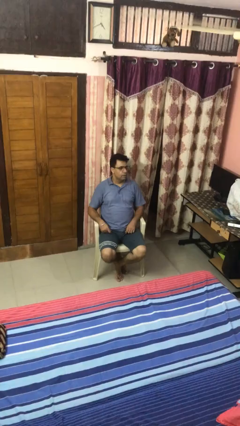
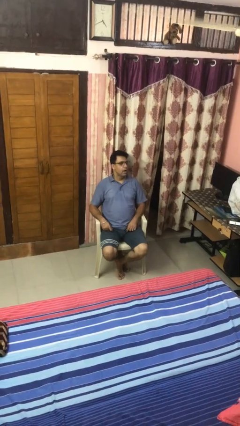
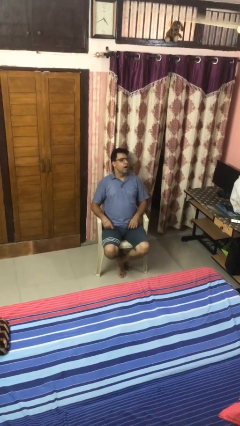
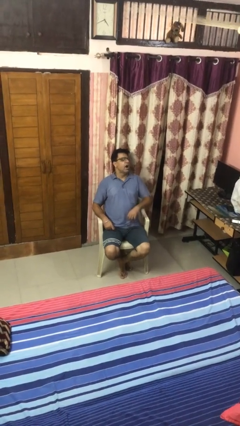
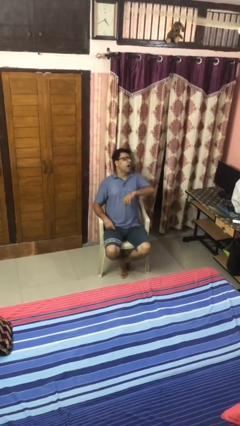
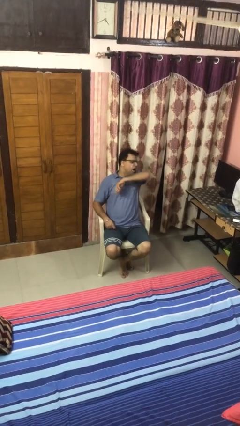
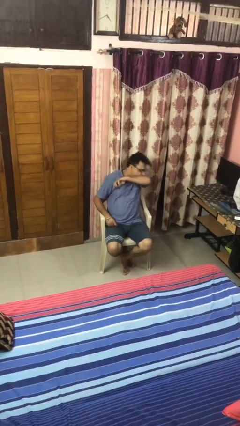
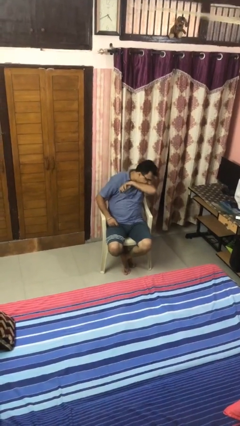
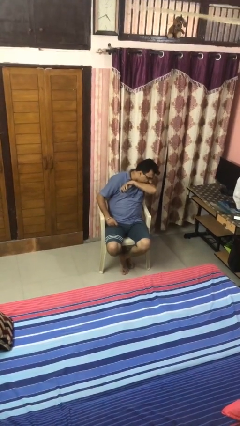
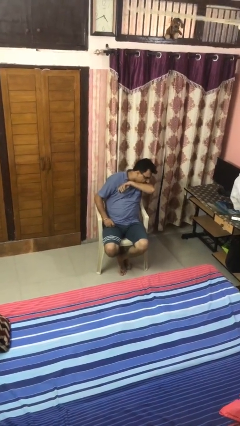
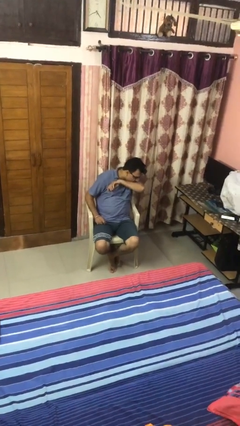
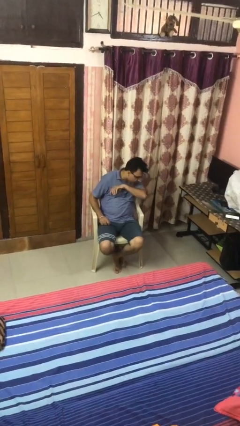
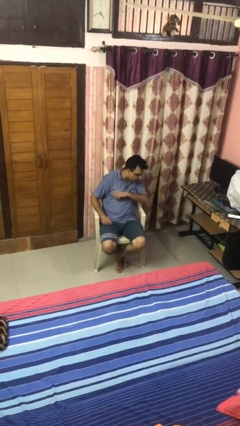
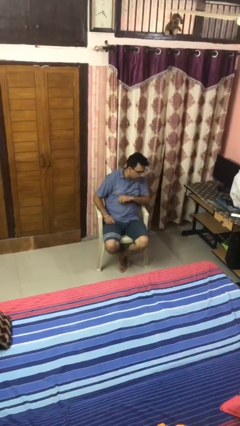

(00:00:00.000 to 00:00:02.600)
person sneezes into arm

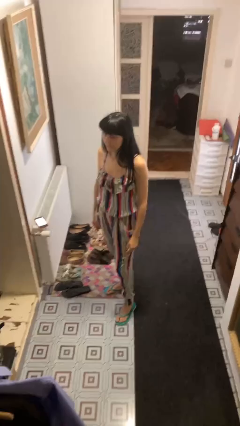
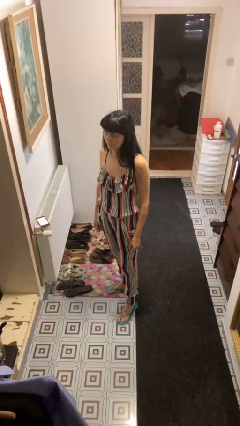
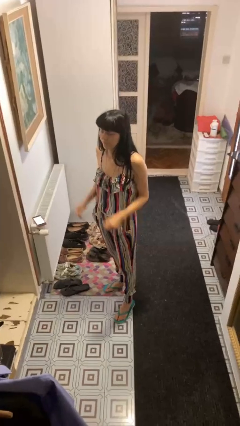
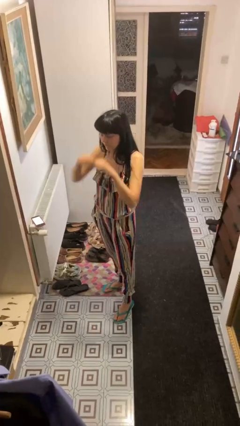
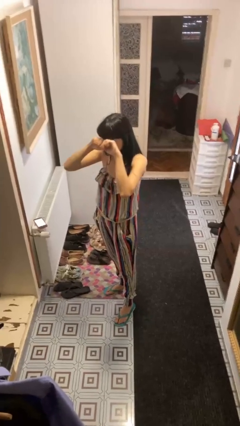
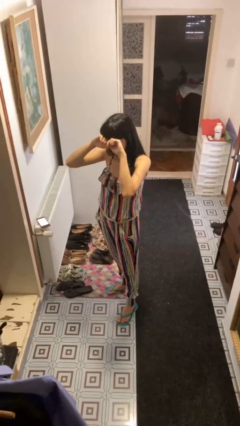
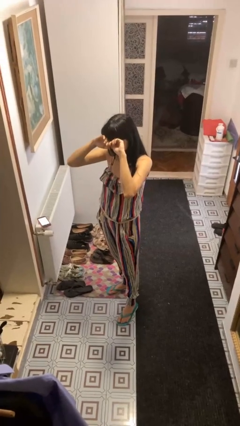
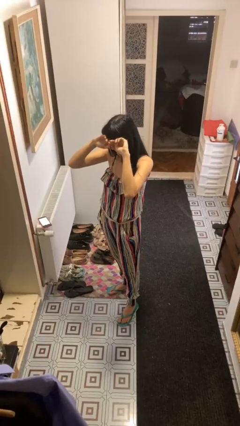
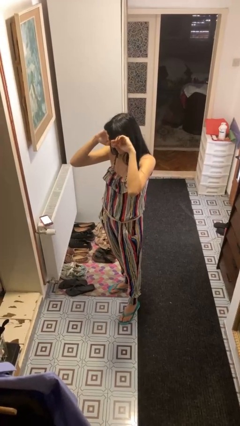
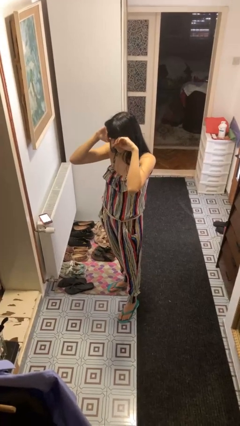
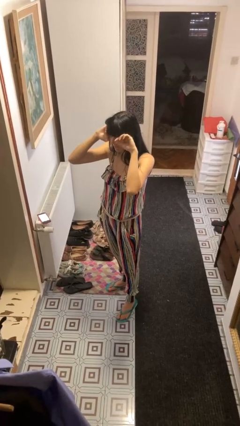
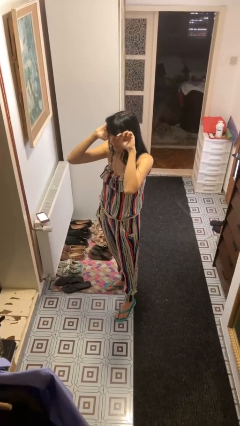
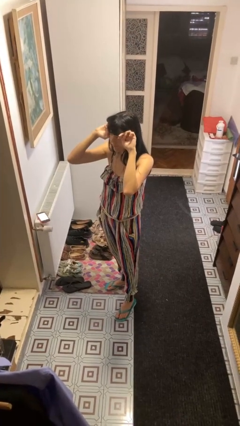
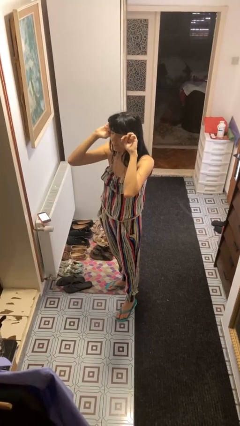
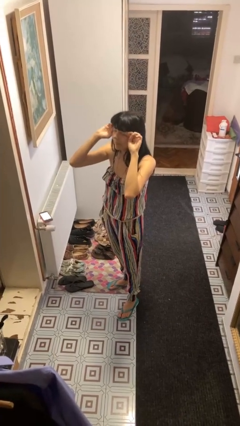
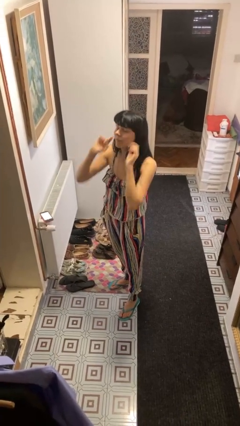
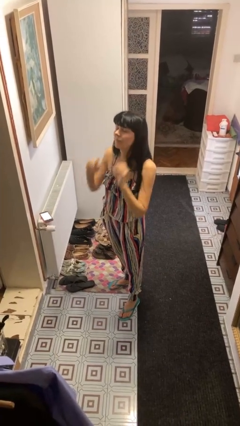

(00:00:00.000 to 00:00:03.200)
person rubs eyes

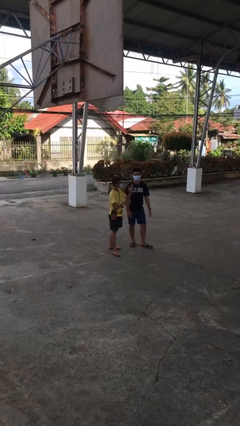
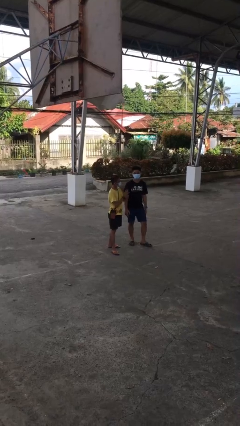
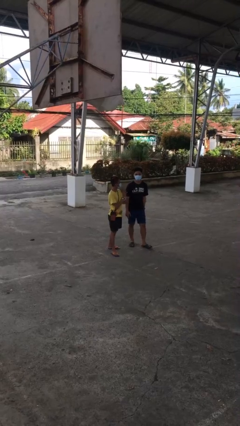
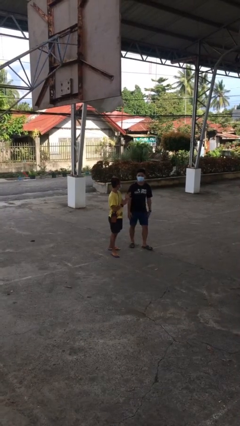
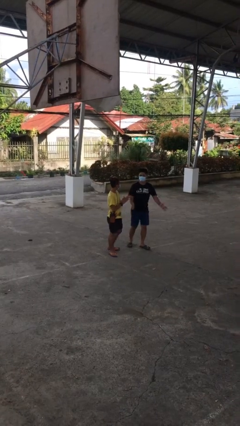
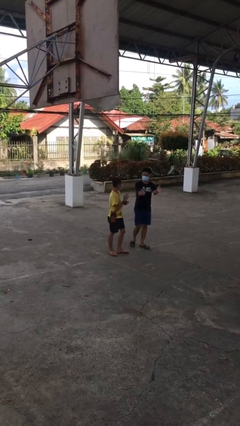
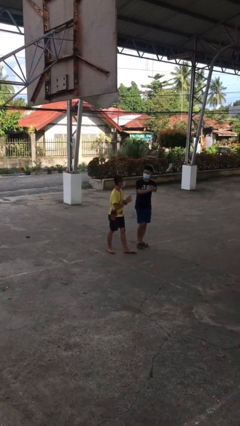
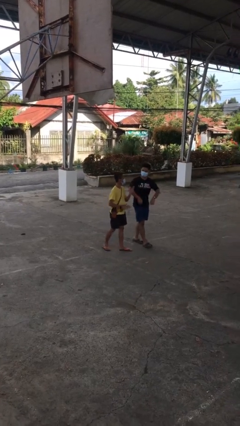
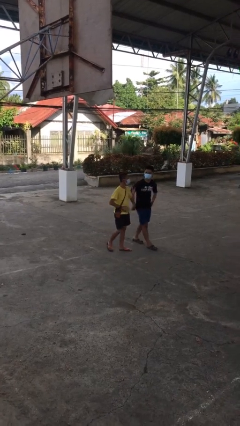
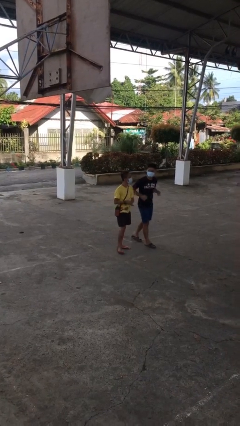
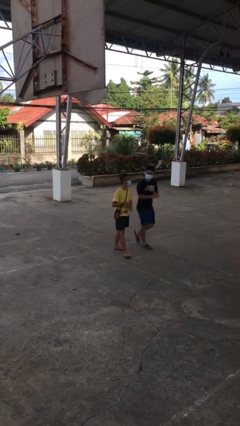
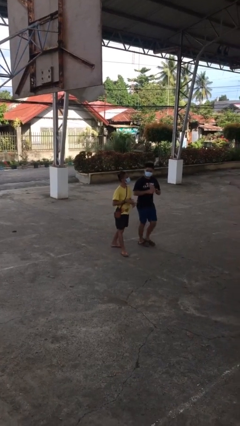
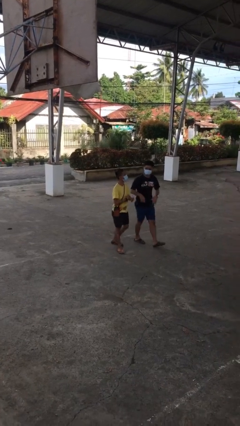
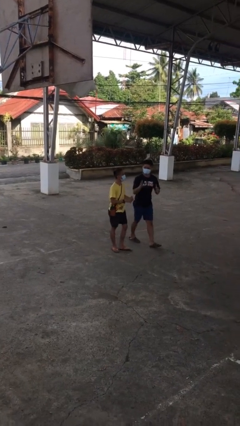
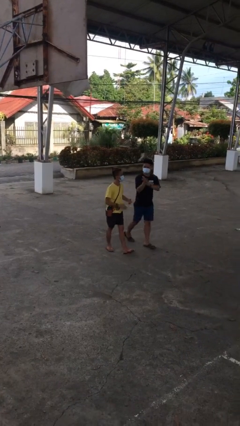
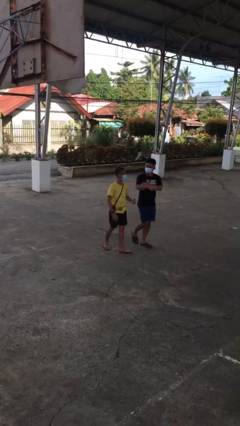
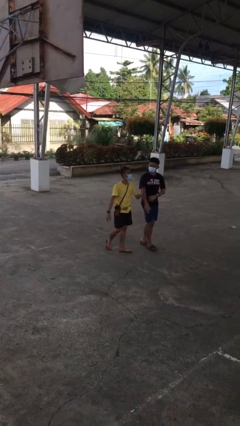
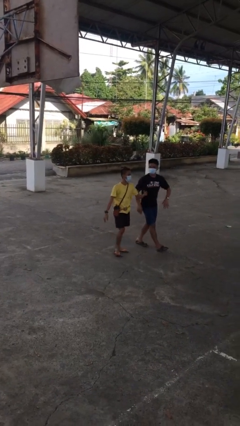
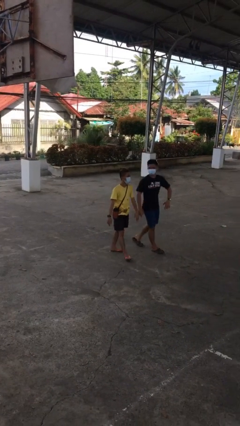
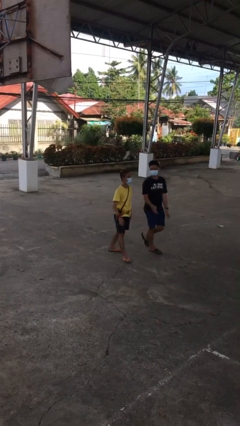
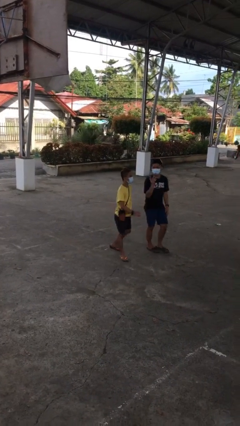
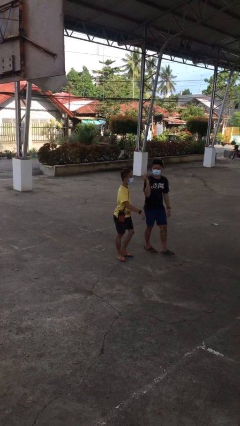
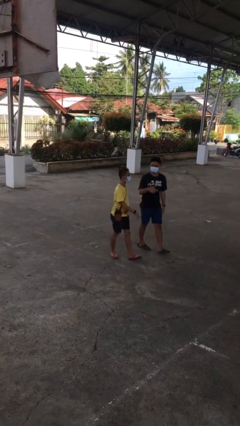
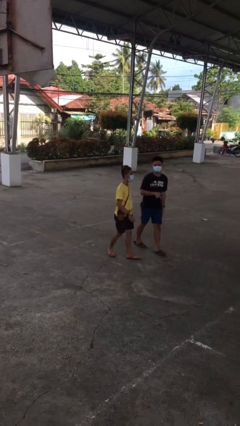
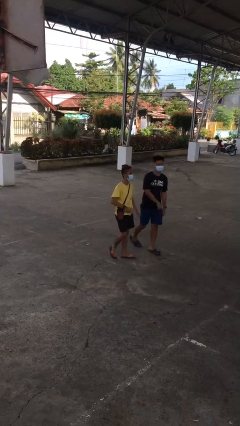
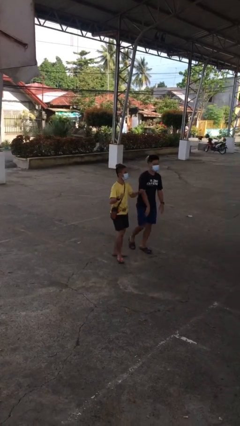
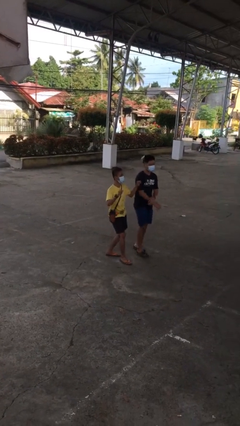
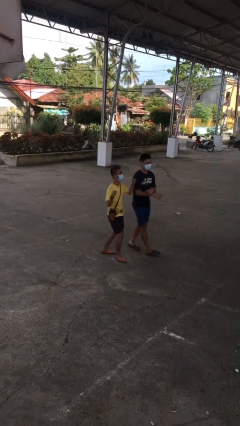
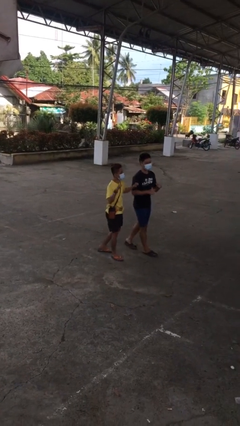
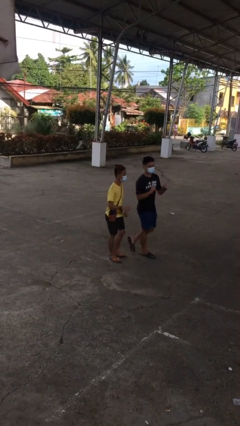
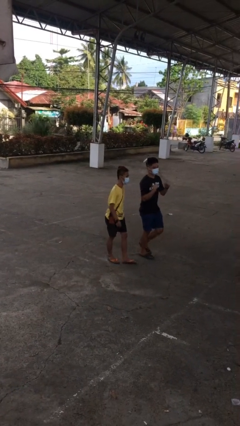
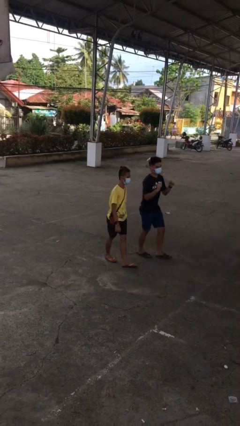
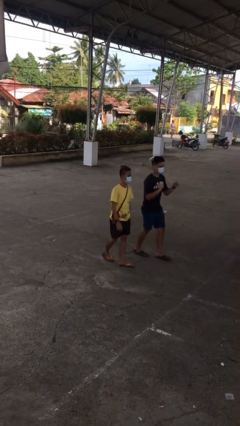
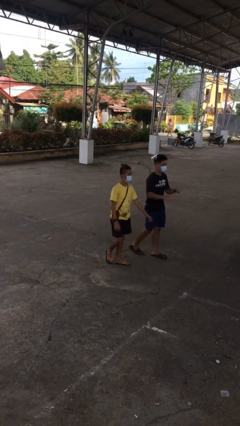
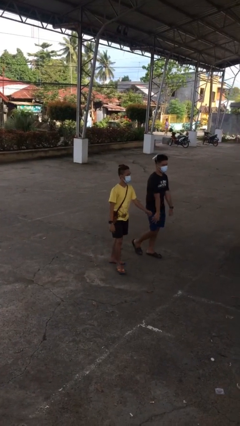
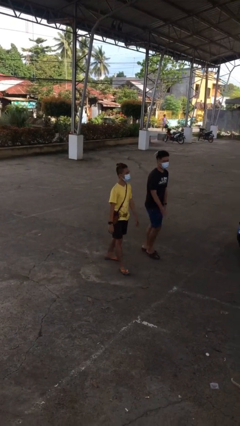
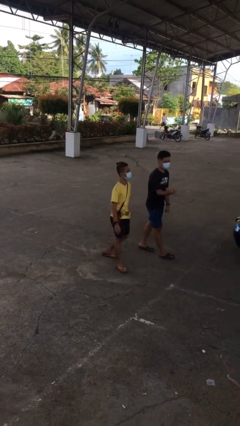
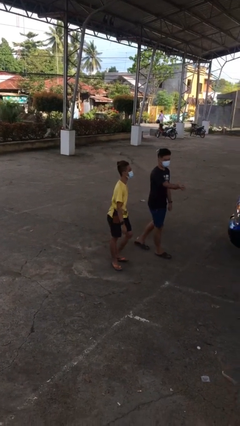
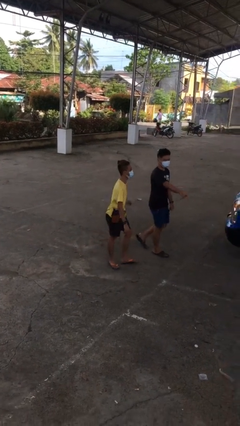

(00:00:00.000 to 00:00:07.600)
person talks to person

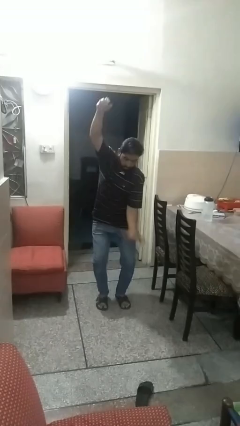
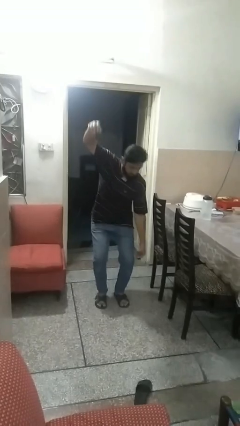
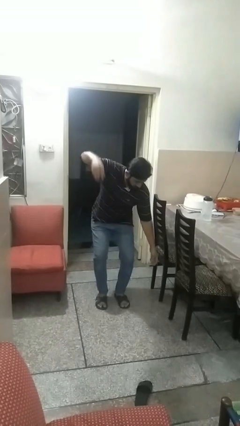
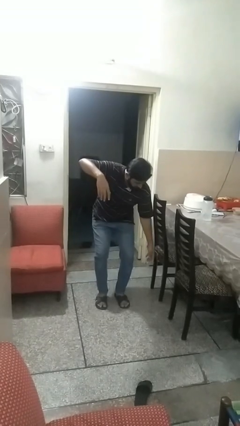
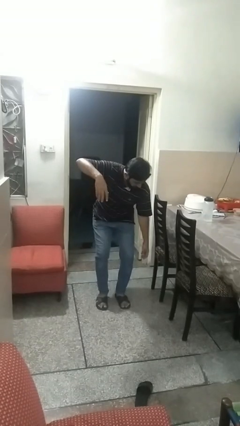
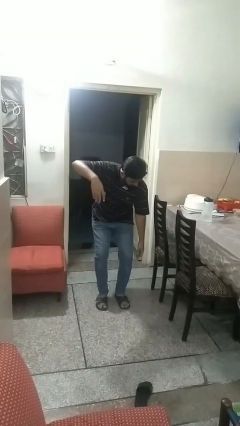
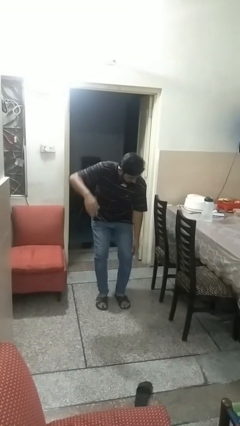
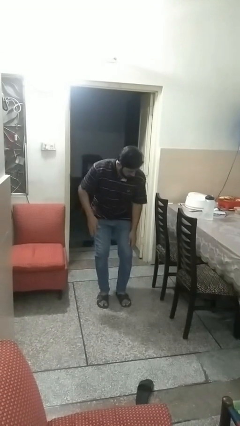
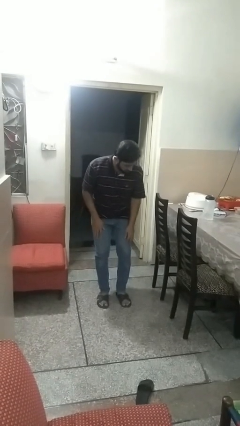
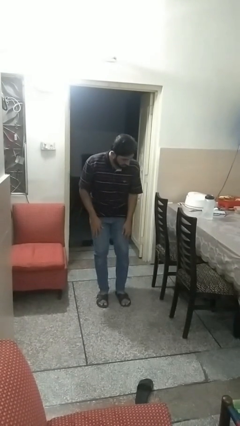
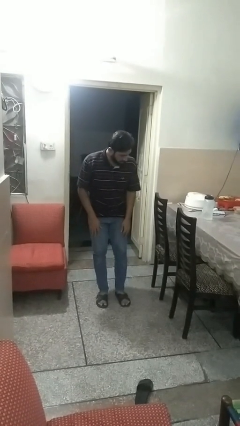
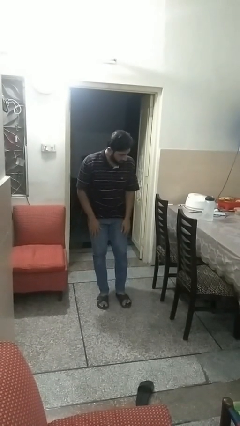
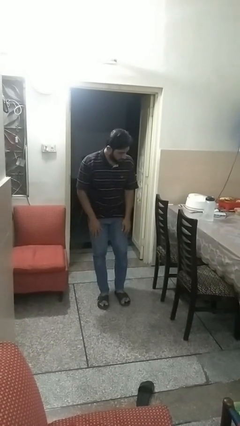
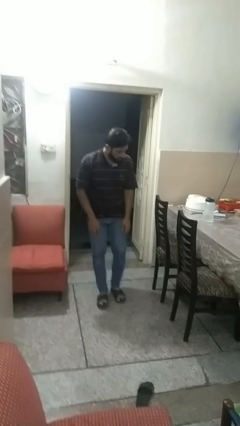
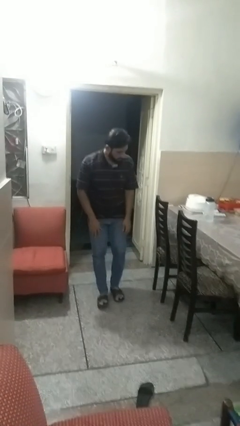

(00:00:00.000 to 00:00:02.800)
person catches dropped object

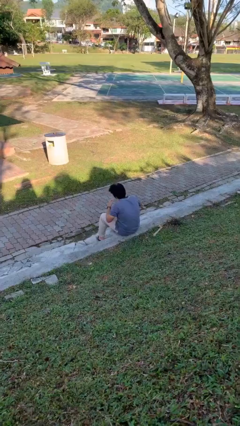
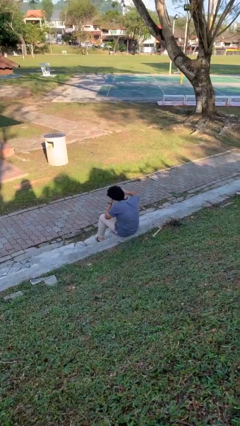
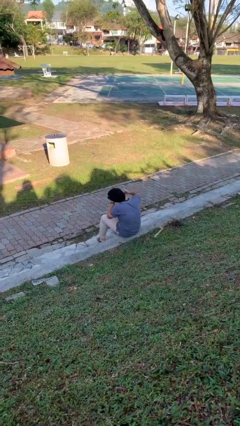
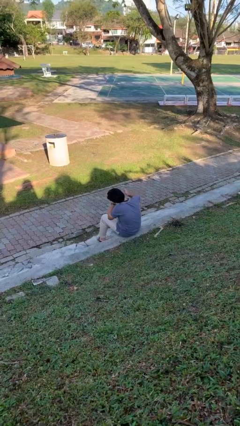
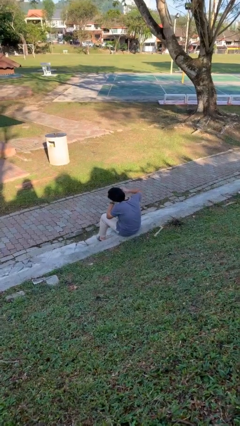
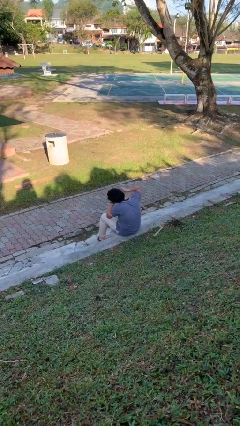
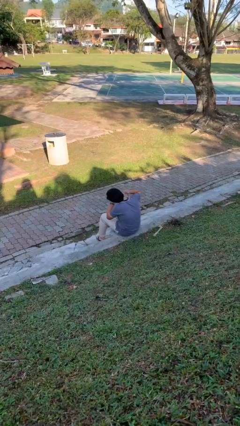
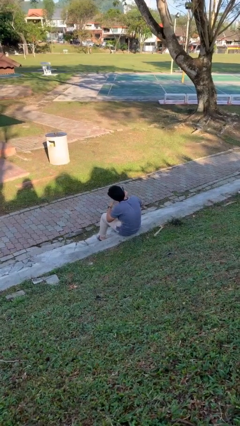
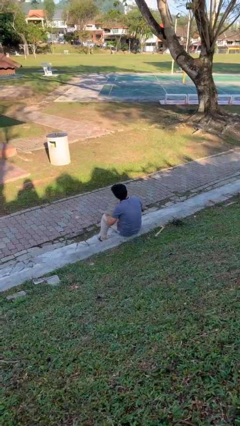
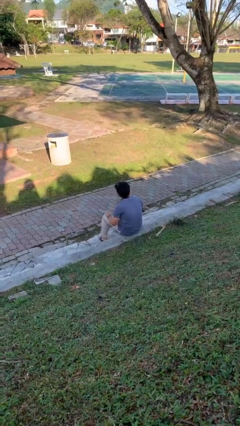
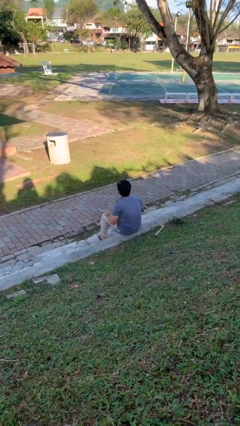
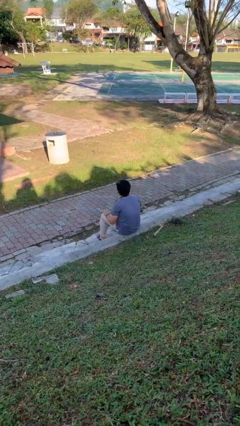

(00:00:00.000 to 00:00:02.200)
person brushes hair
